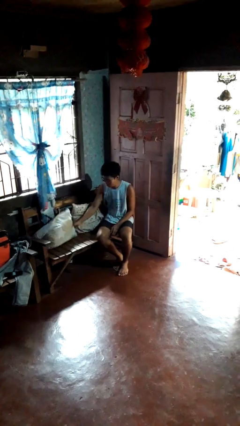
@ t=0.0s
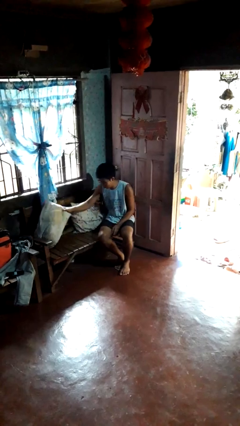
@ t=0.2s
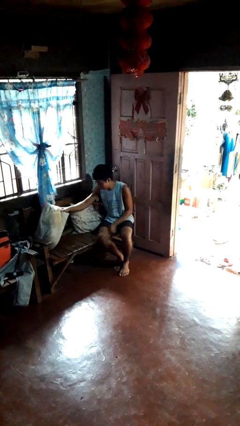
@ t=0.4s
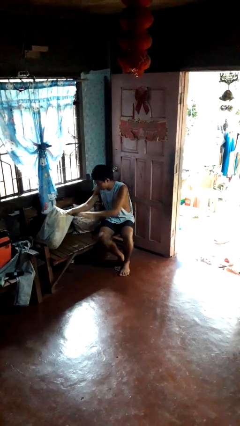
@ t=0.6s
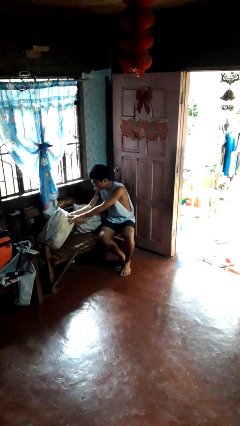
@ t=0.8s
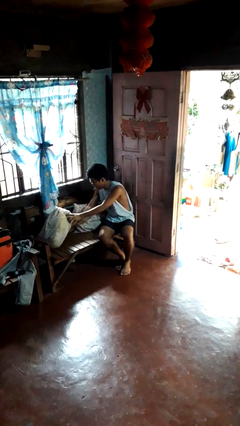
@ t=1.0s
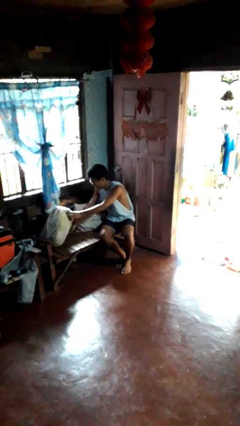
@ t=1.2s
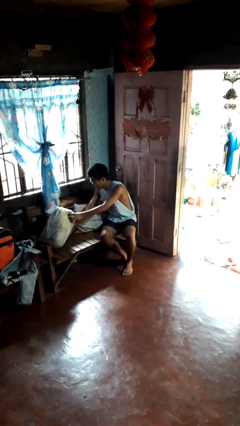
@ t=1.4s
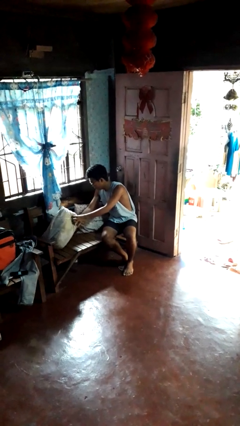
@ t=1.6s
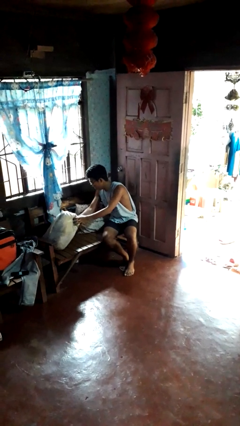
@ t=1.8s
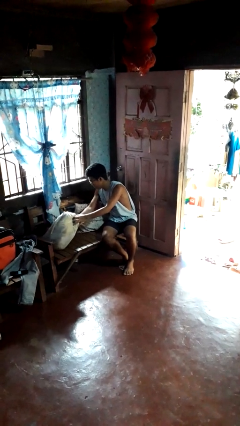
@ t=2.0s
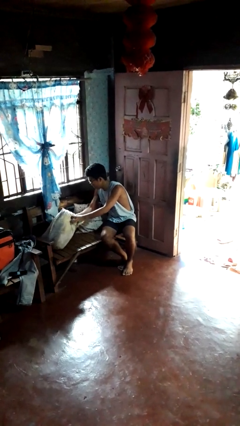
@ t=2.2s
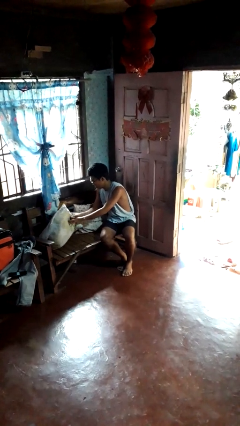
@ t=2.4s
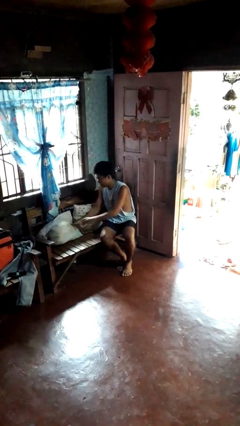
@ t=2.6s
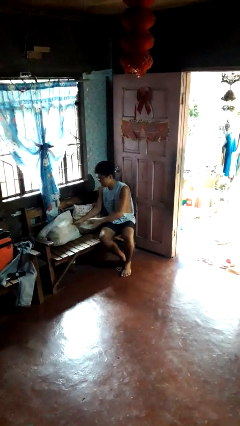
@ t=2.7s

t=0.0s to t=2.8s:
person searches in couch

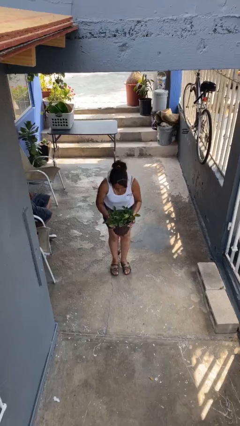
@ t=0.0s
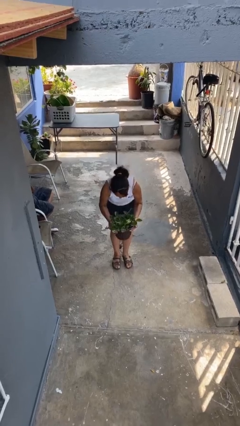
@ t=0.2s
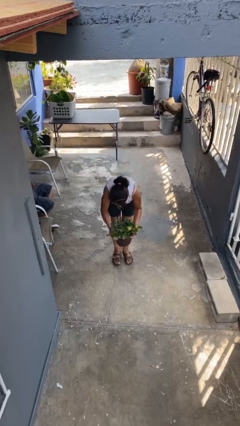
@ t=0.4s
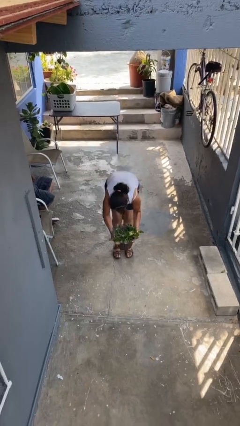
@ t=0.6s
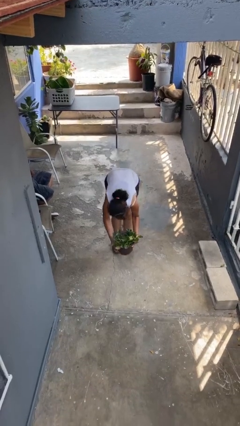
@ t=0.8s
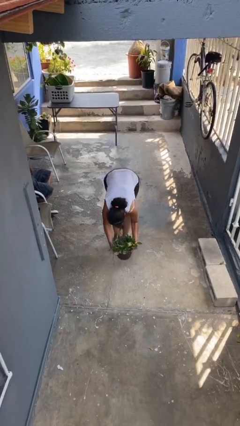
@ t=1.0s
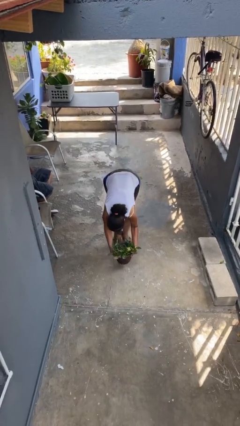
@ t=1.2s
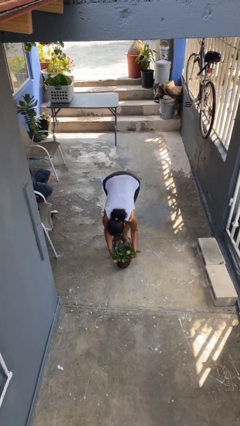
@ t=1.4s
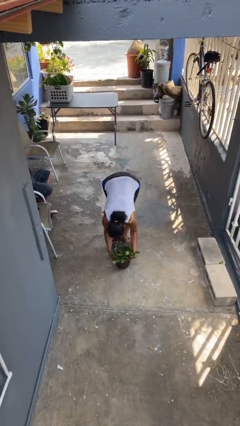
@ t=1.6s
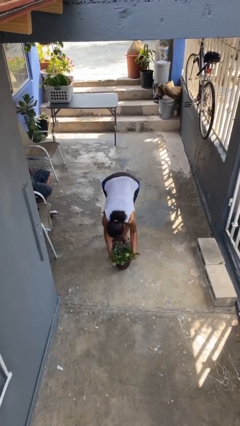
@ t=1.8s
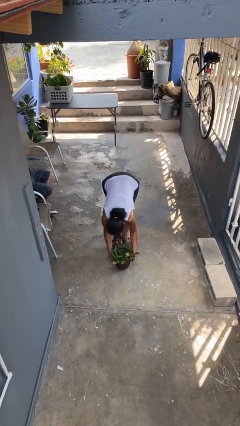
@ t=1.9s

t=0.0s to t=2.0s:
person puts down object on floor

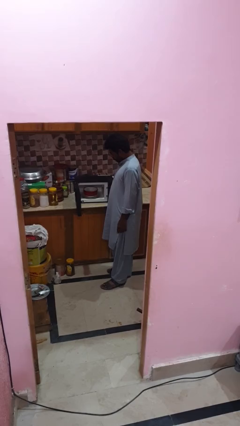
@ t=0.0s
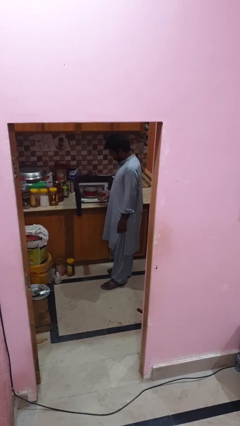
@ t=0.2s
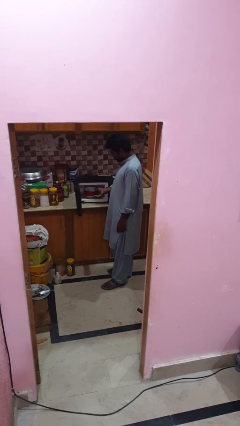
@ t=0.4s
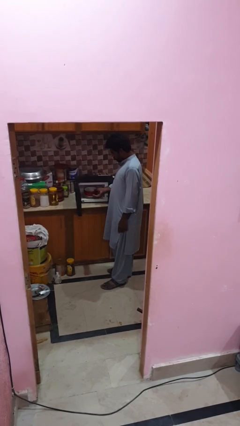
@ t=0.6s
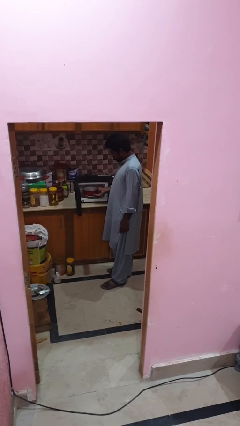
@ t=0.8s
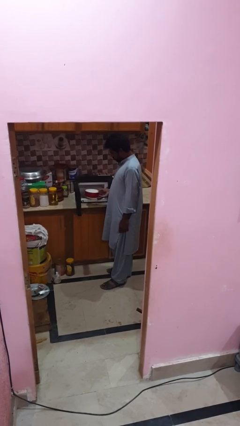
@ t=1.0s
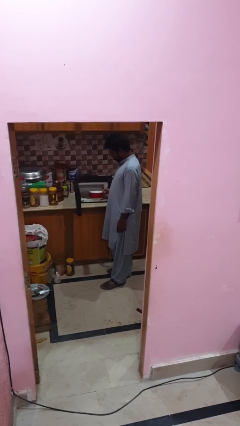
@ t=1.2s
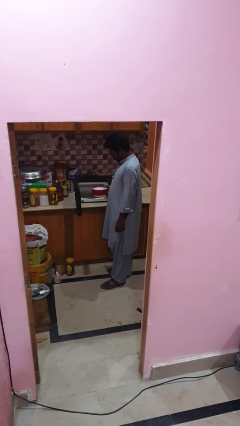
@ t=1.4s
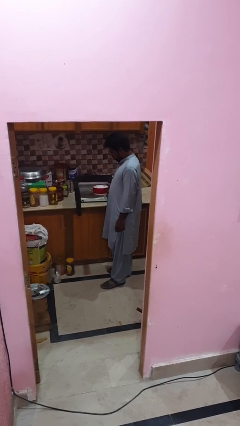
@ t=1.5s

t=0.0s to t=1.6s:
person takes object from microwave

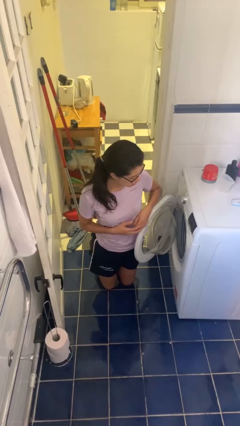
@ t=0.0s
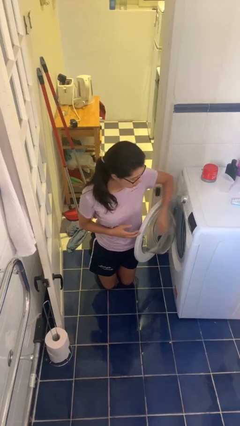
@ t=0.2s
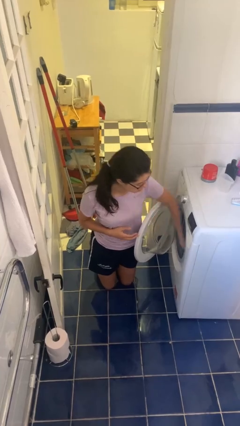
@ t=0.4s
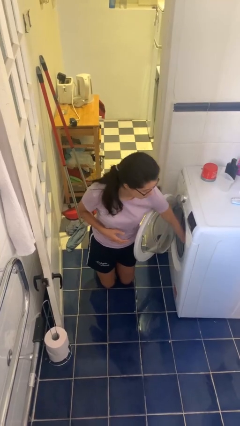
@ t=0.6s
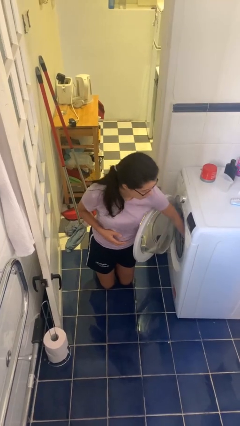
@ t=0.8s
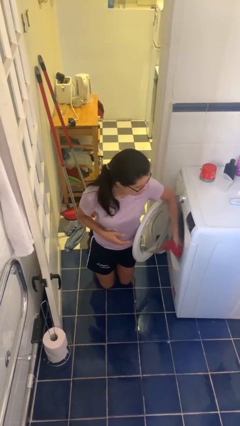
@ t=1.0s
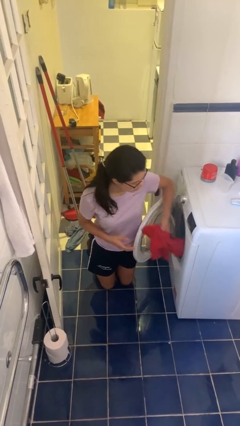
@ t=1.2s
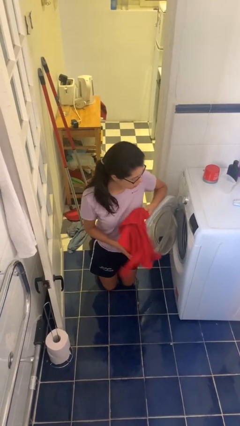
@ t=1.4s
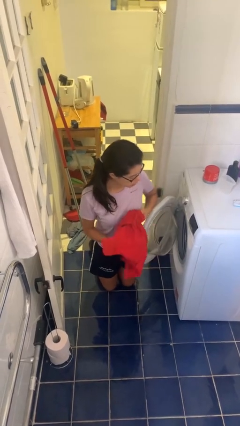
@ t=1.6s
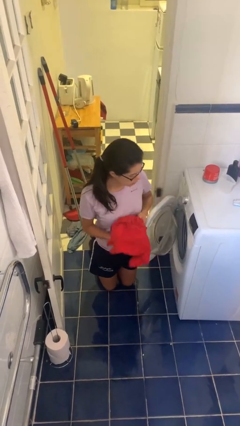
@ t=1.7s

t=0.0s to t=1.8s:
person unloads dryer

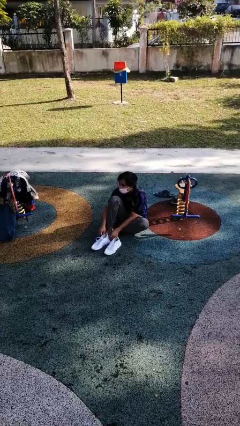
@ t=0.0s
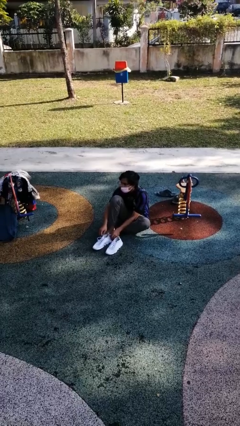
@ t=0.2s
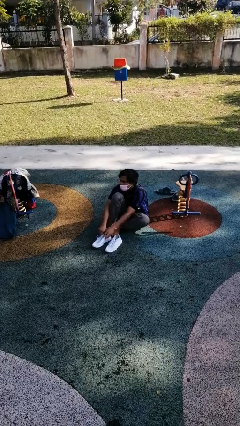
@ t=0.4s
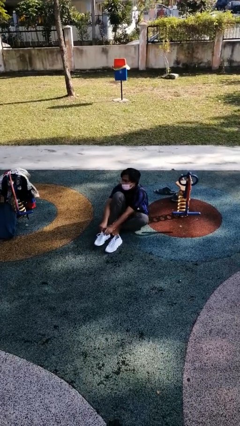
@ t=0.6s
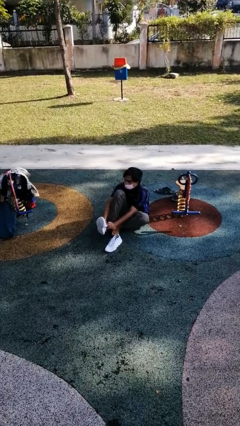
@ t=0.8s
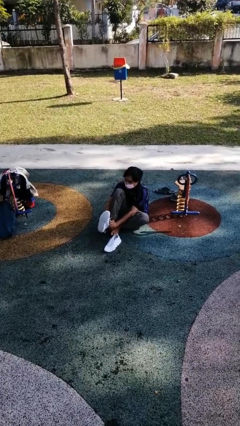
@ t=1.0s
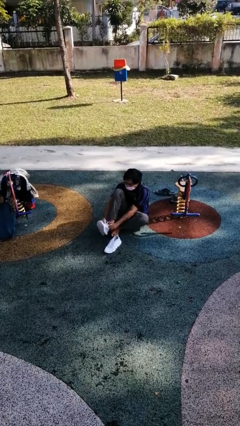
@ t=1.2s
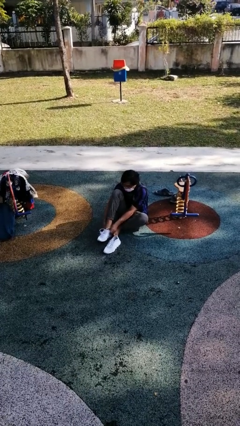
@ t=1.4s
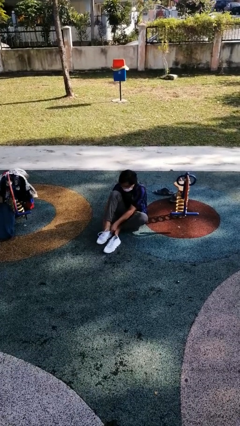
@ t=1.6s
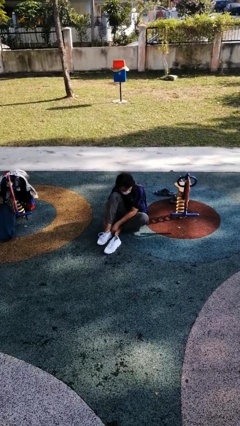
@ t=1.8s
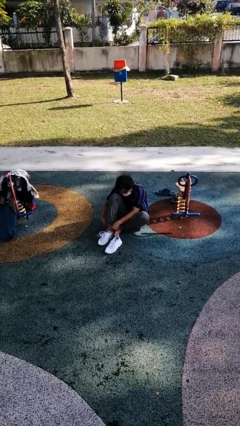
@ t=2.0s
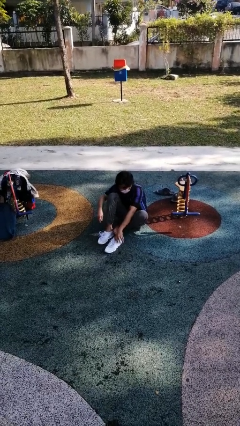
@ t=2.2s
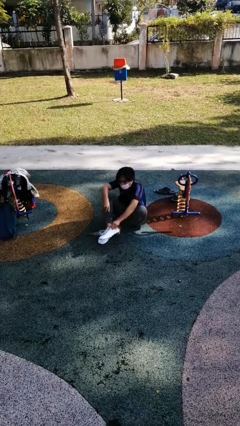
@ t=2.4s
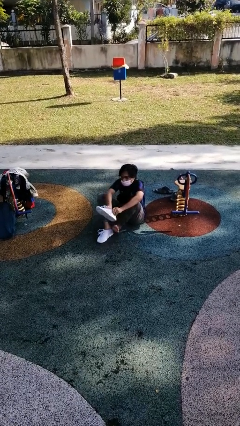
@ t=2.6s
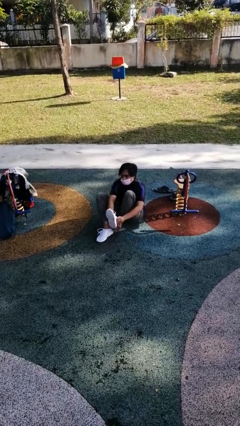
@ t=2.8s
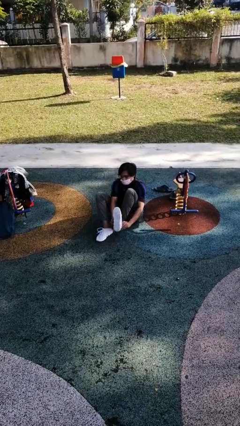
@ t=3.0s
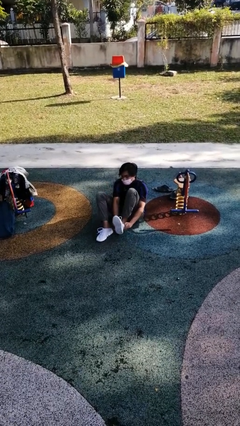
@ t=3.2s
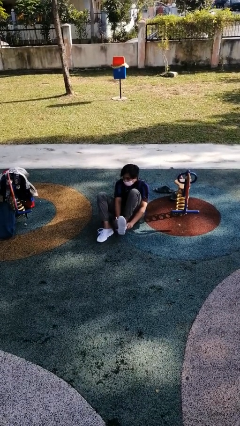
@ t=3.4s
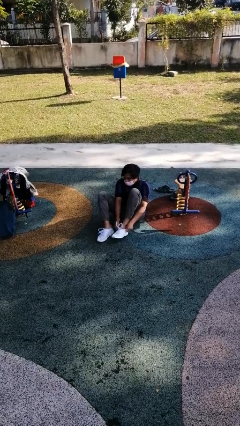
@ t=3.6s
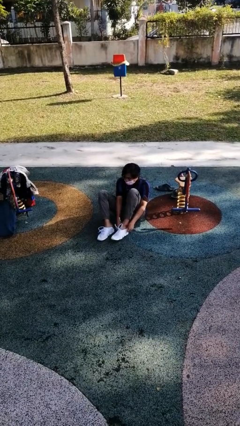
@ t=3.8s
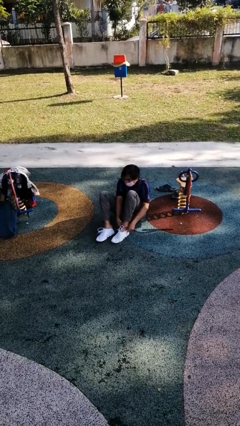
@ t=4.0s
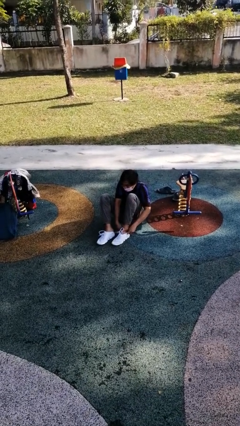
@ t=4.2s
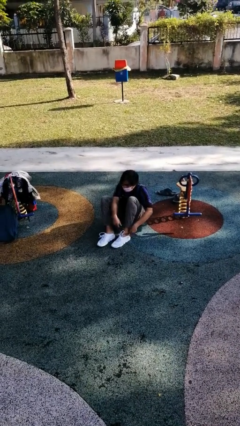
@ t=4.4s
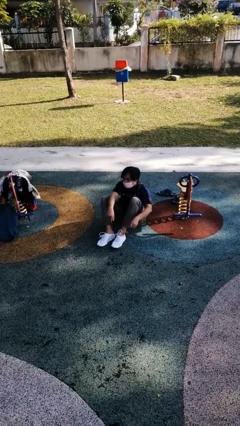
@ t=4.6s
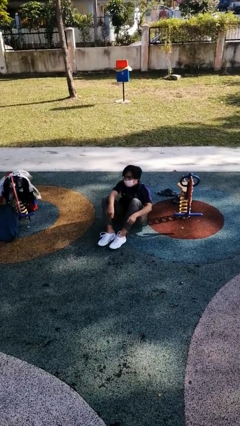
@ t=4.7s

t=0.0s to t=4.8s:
person puts on shoes

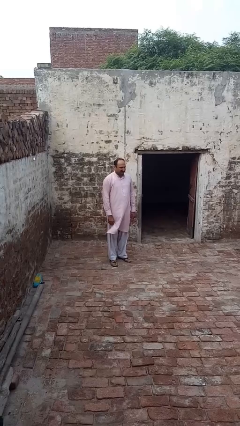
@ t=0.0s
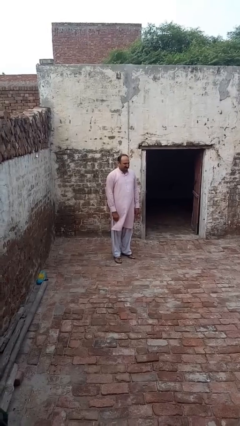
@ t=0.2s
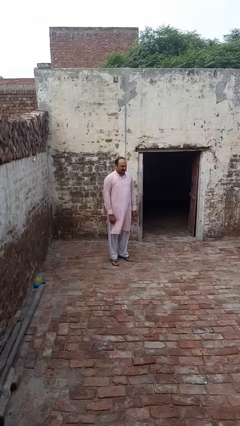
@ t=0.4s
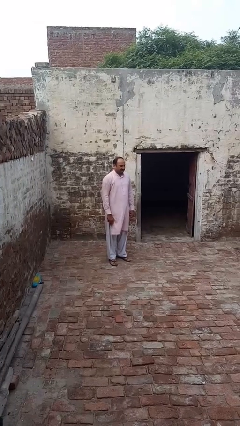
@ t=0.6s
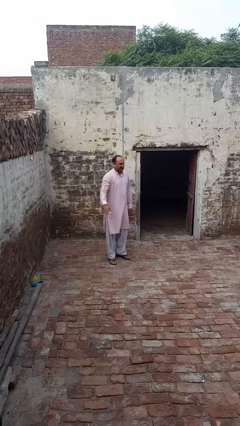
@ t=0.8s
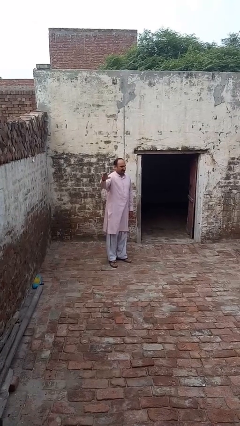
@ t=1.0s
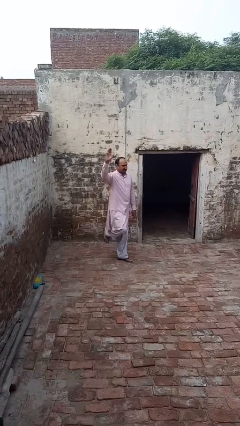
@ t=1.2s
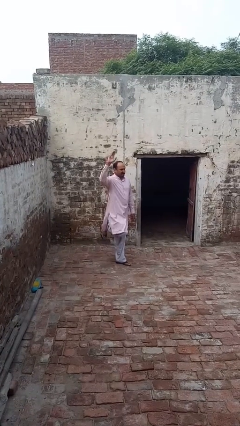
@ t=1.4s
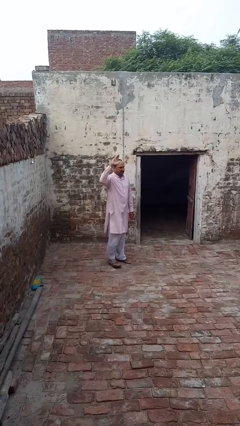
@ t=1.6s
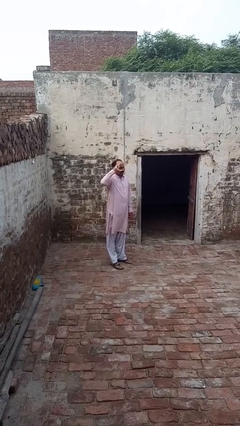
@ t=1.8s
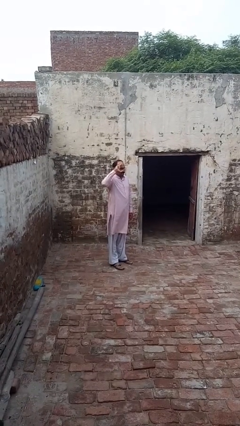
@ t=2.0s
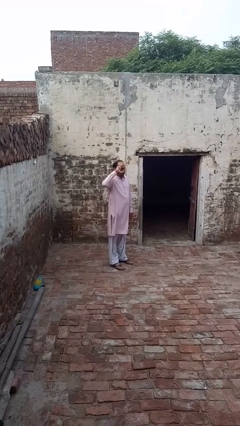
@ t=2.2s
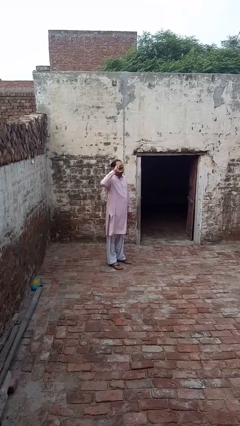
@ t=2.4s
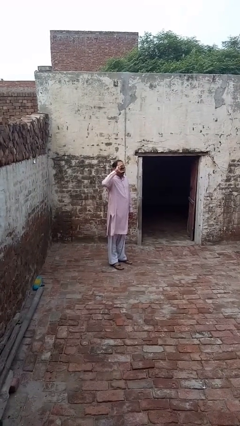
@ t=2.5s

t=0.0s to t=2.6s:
person salutes

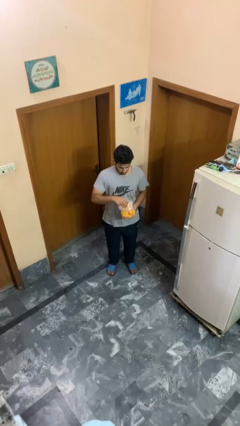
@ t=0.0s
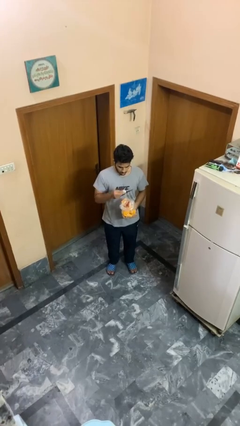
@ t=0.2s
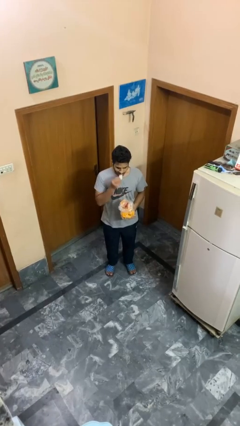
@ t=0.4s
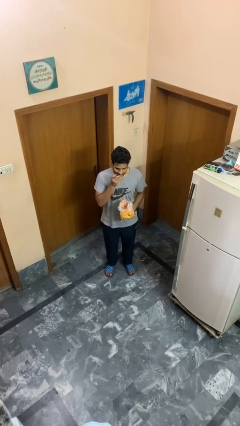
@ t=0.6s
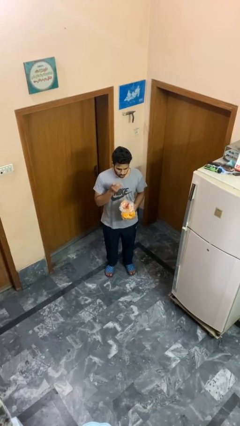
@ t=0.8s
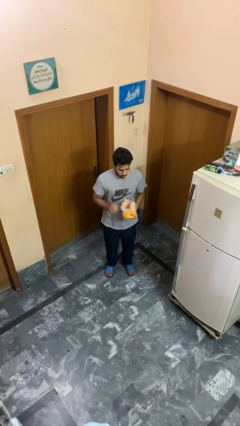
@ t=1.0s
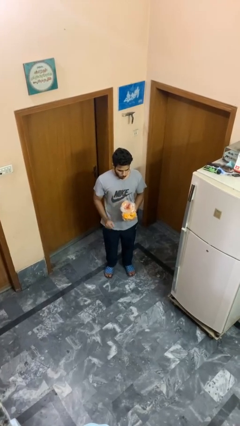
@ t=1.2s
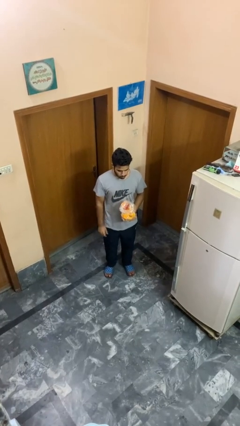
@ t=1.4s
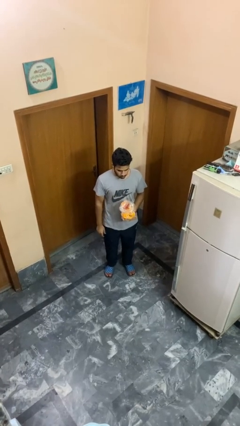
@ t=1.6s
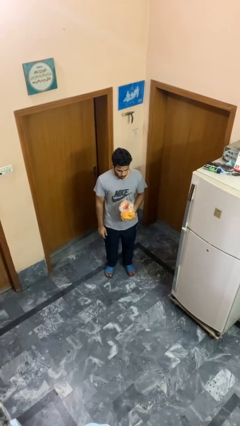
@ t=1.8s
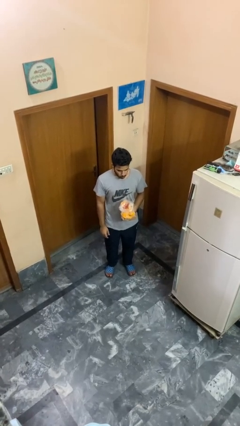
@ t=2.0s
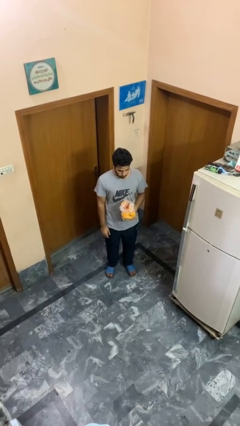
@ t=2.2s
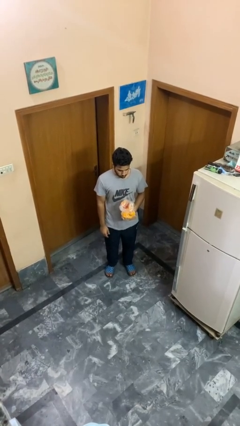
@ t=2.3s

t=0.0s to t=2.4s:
person eats snack from bag
